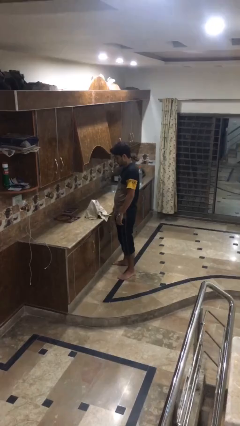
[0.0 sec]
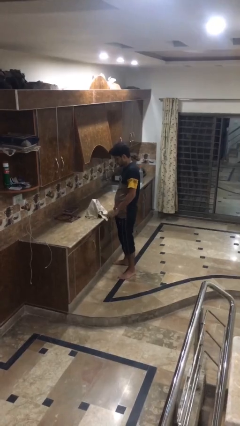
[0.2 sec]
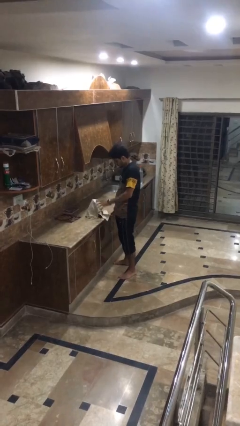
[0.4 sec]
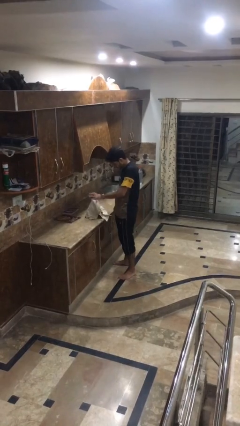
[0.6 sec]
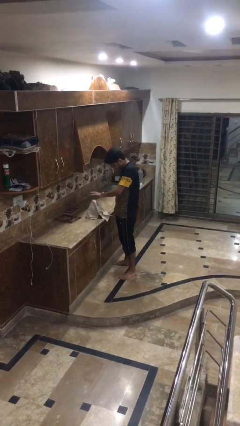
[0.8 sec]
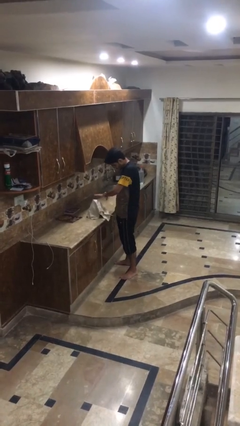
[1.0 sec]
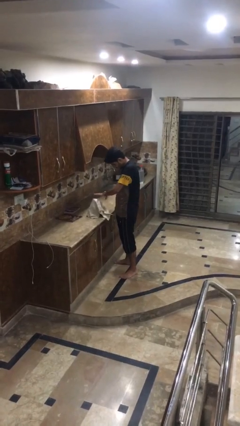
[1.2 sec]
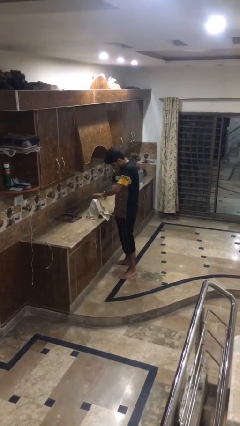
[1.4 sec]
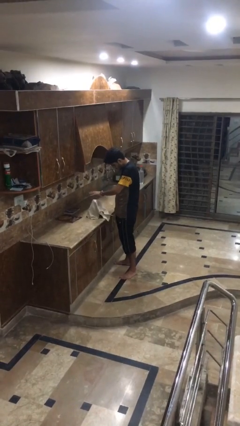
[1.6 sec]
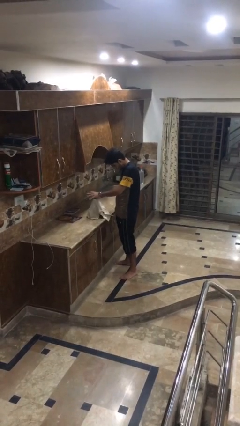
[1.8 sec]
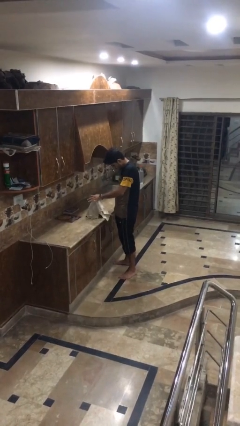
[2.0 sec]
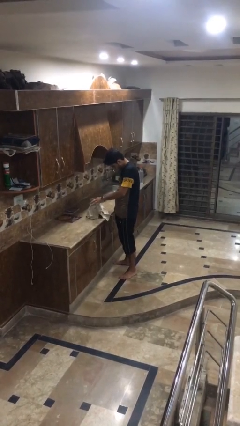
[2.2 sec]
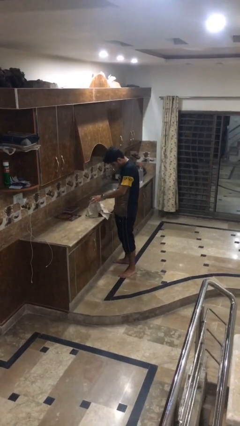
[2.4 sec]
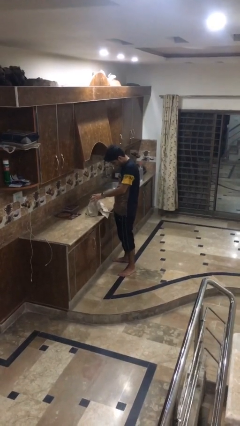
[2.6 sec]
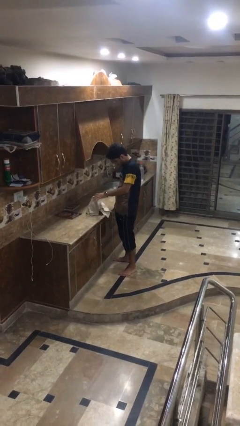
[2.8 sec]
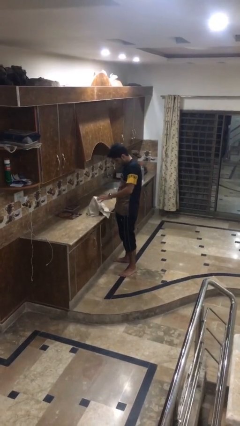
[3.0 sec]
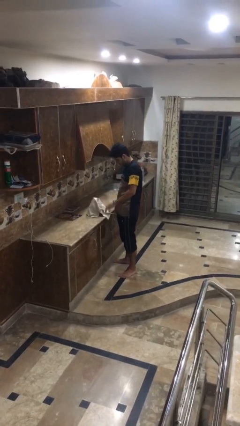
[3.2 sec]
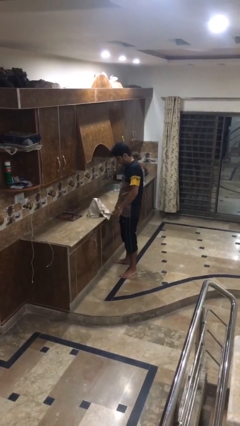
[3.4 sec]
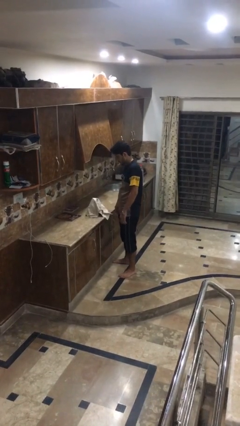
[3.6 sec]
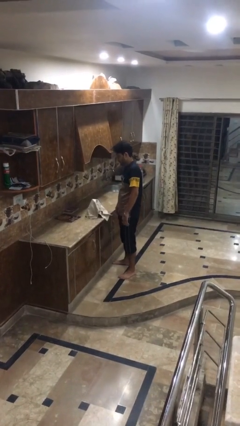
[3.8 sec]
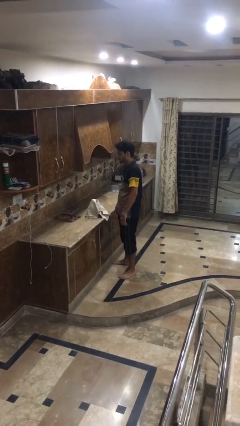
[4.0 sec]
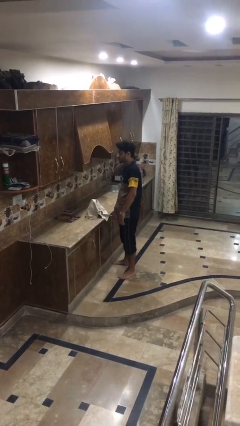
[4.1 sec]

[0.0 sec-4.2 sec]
person waves hand over object

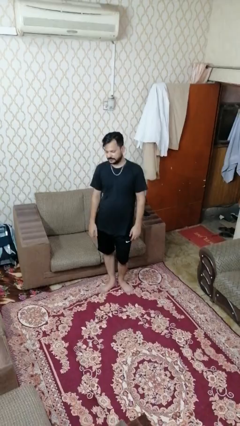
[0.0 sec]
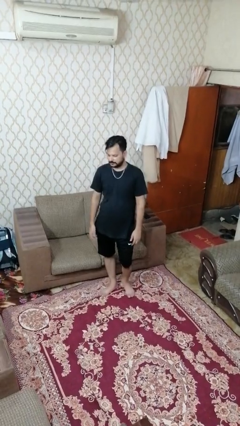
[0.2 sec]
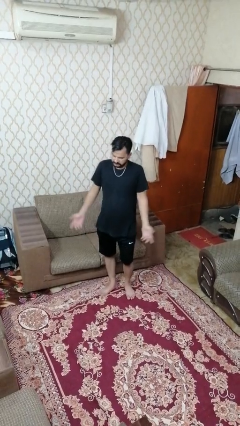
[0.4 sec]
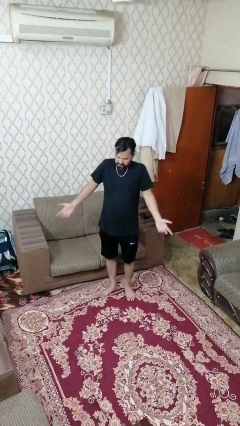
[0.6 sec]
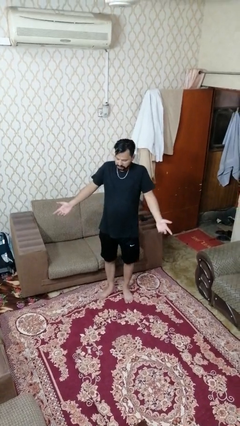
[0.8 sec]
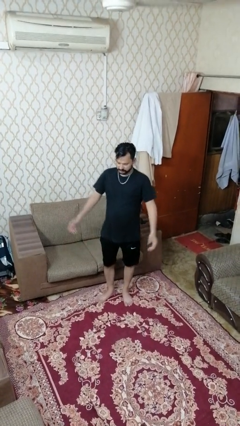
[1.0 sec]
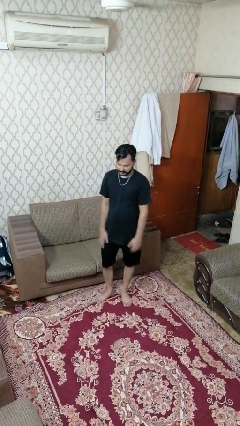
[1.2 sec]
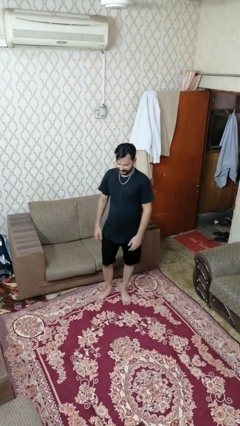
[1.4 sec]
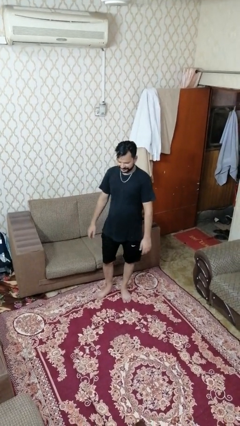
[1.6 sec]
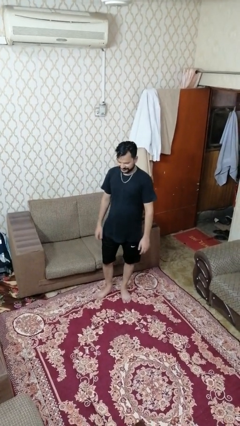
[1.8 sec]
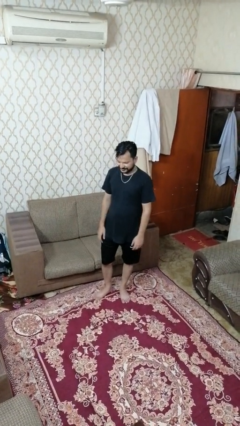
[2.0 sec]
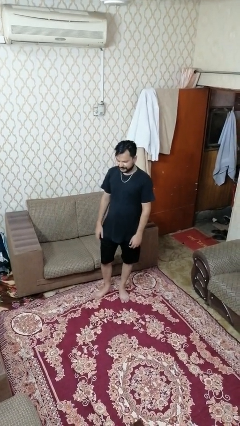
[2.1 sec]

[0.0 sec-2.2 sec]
person shrugs

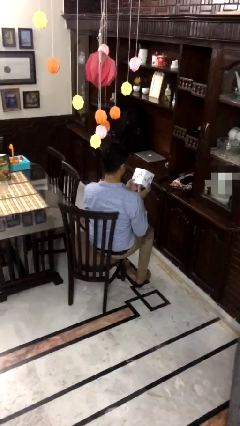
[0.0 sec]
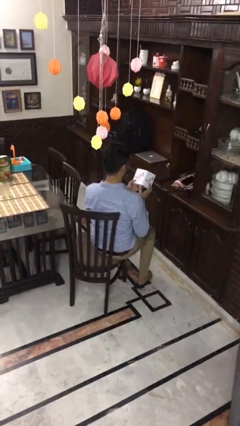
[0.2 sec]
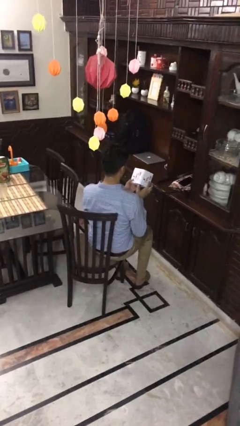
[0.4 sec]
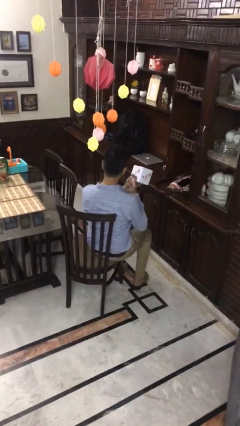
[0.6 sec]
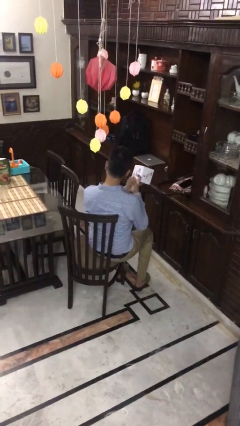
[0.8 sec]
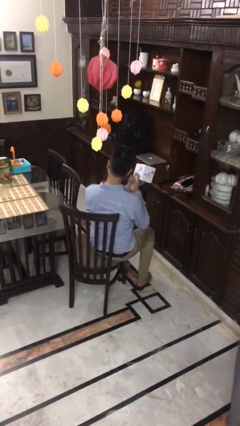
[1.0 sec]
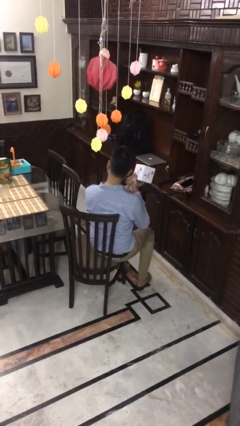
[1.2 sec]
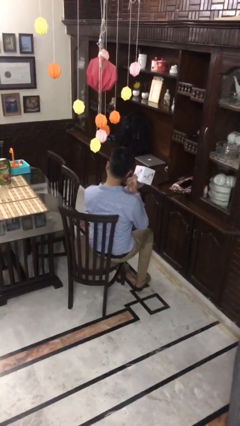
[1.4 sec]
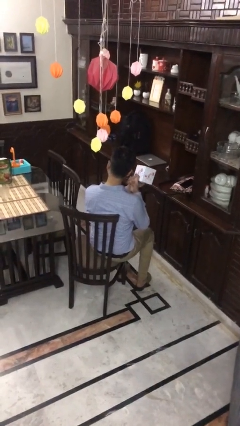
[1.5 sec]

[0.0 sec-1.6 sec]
person taps object with finger

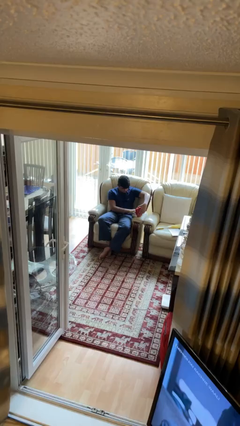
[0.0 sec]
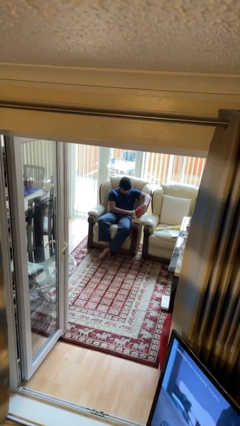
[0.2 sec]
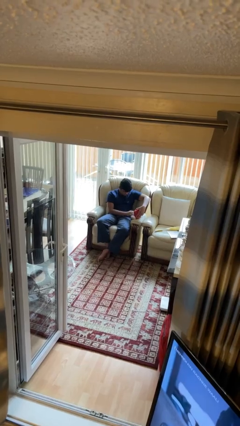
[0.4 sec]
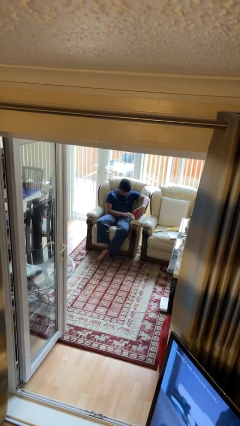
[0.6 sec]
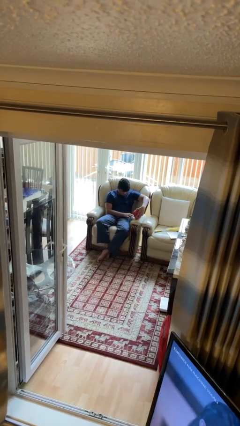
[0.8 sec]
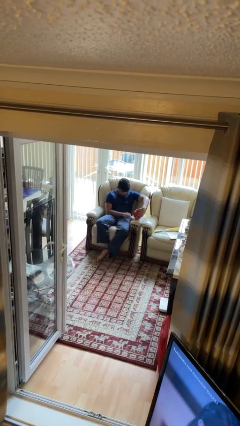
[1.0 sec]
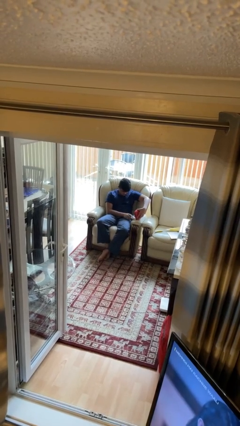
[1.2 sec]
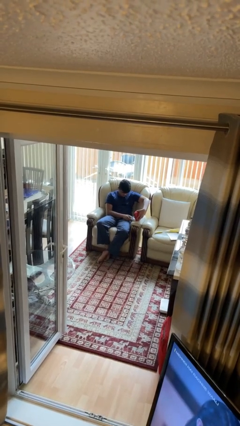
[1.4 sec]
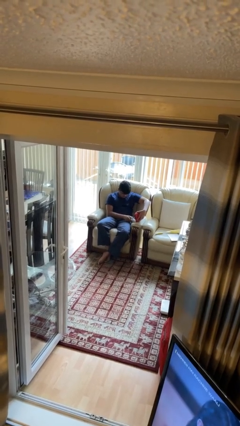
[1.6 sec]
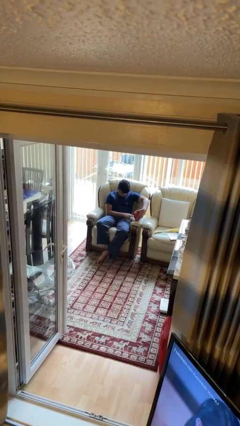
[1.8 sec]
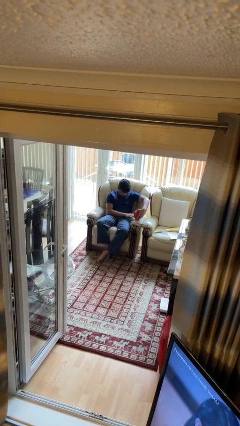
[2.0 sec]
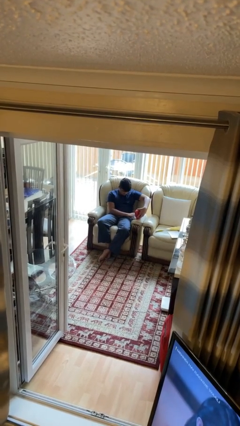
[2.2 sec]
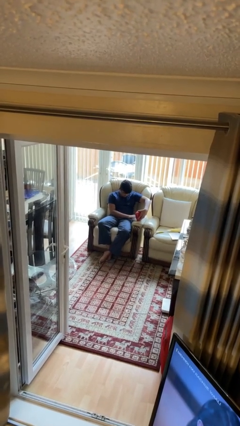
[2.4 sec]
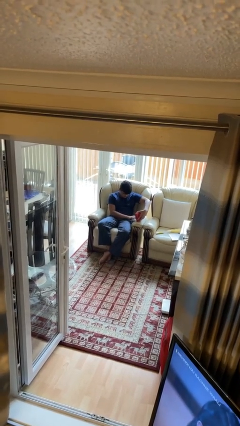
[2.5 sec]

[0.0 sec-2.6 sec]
person searches jewelry box

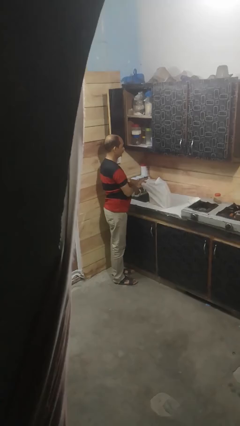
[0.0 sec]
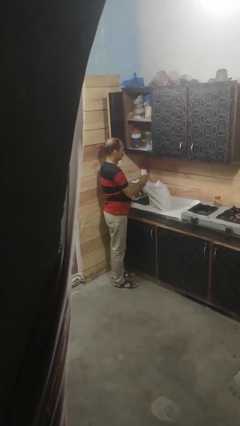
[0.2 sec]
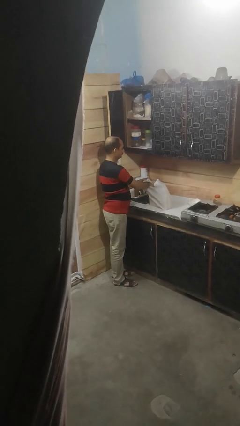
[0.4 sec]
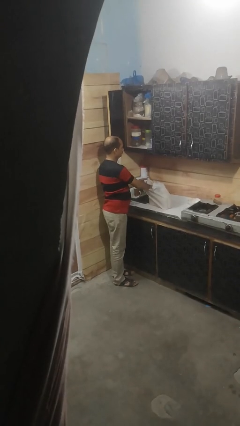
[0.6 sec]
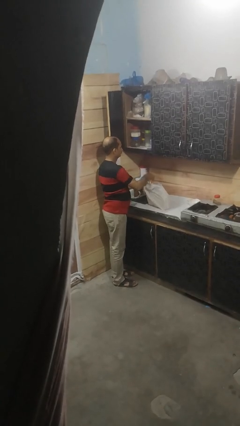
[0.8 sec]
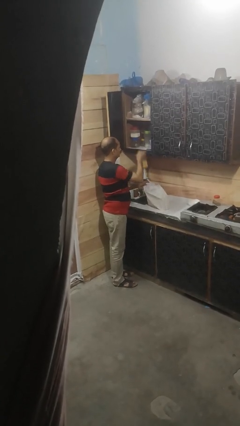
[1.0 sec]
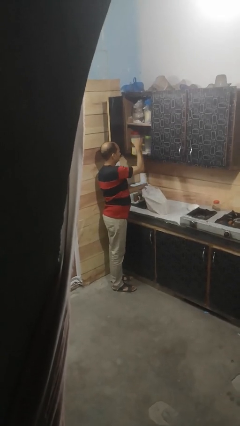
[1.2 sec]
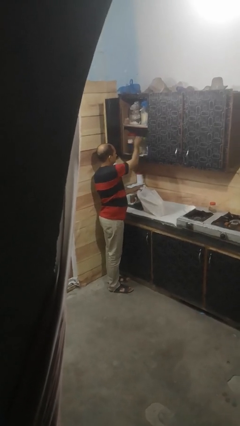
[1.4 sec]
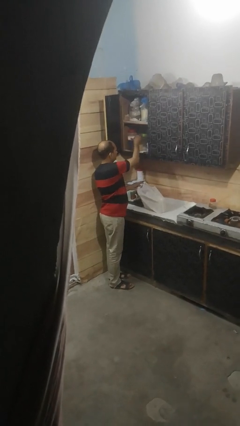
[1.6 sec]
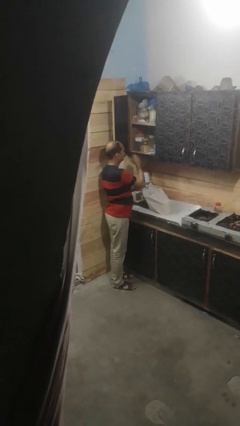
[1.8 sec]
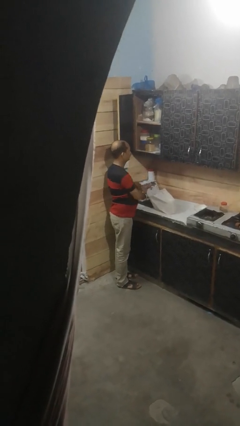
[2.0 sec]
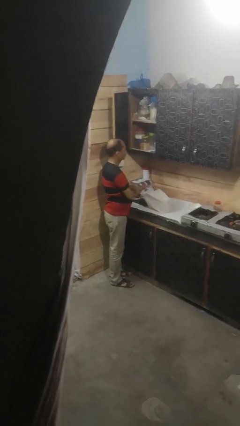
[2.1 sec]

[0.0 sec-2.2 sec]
person loads groceries into cabinet

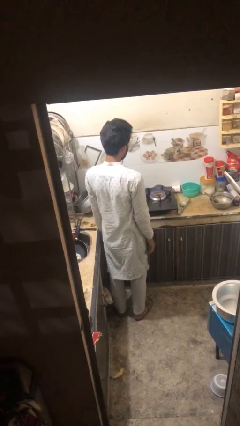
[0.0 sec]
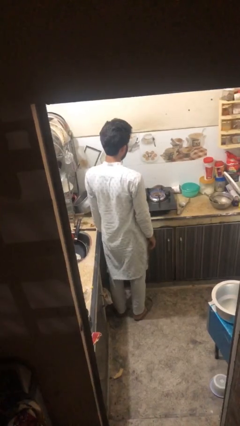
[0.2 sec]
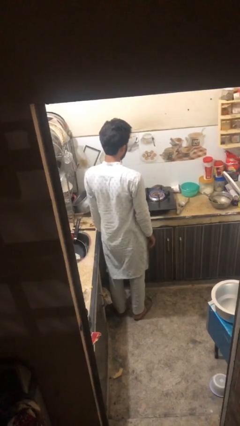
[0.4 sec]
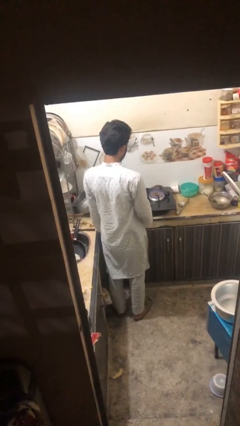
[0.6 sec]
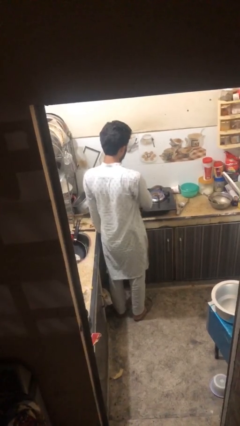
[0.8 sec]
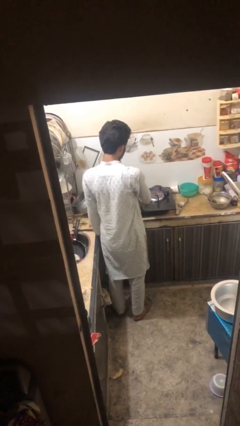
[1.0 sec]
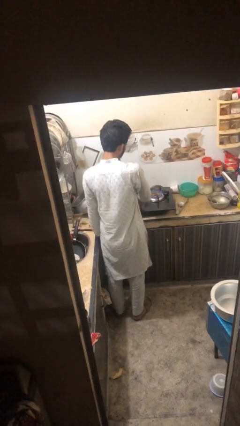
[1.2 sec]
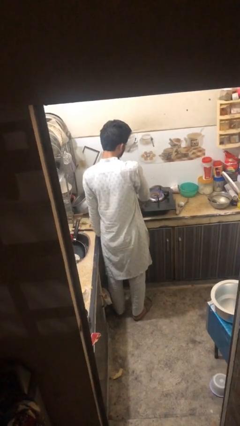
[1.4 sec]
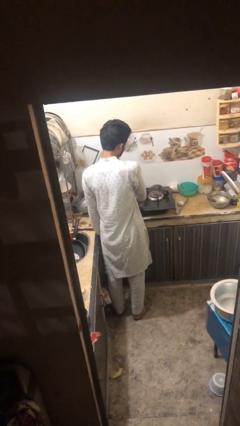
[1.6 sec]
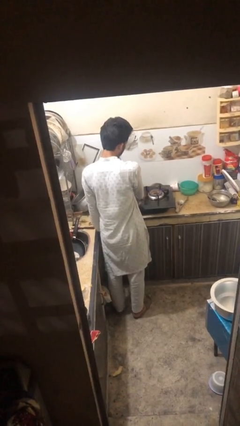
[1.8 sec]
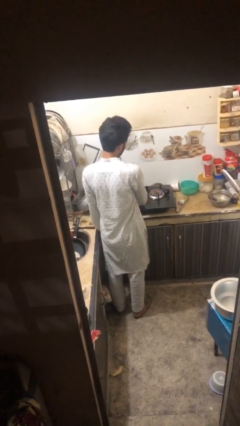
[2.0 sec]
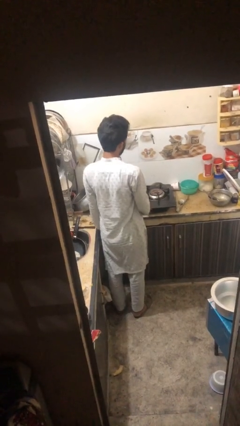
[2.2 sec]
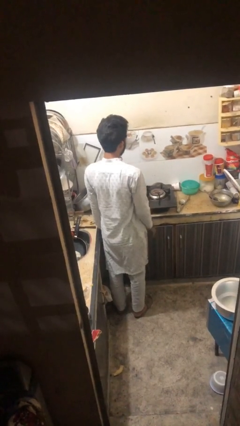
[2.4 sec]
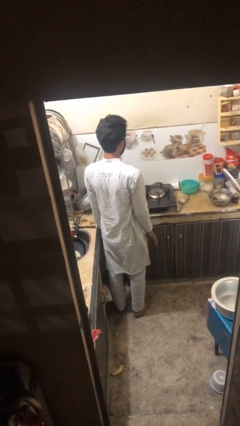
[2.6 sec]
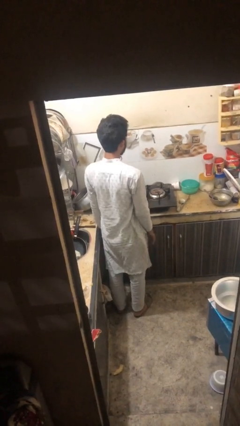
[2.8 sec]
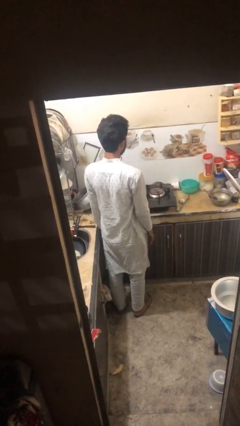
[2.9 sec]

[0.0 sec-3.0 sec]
person turns off stovetop

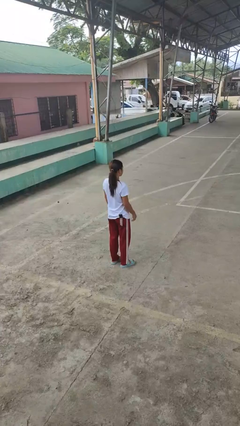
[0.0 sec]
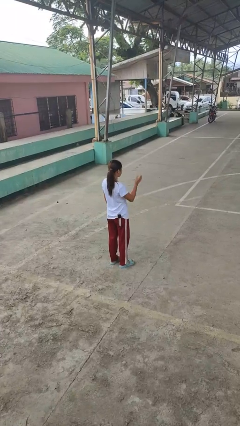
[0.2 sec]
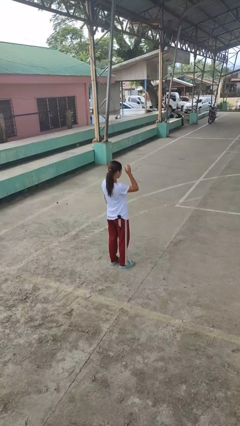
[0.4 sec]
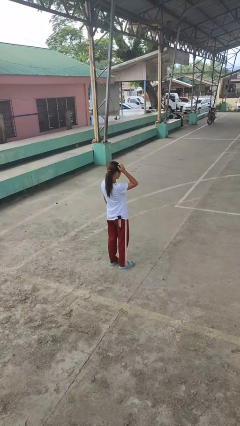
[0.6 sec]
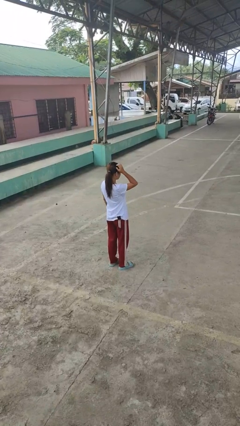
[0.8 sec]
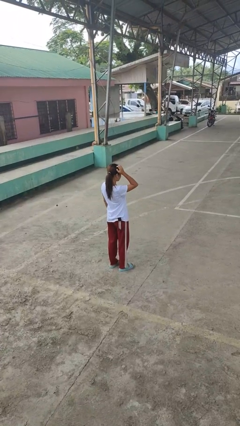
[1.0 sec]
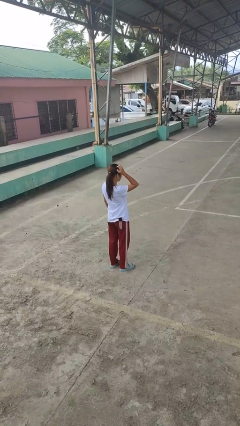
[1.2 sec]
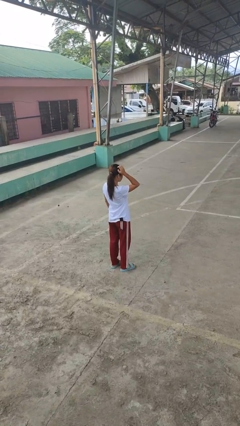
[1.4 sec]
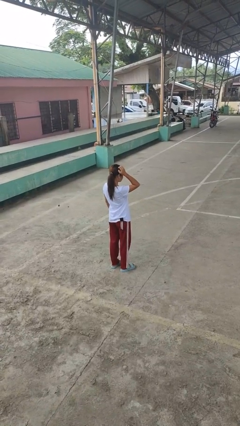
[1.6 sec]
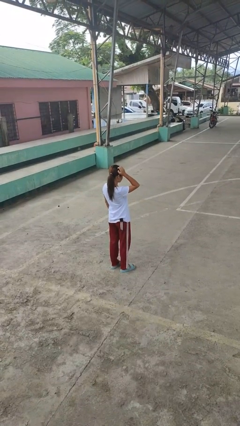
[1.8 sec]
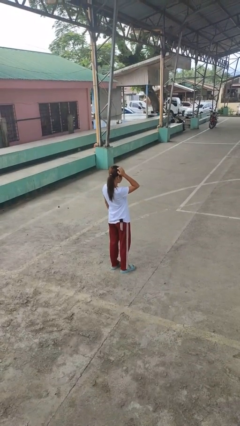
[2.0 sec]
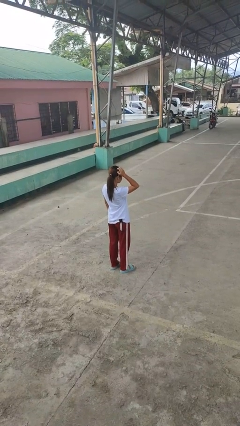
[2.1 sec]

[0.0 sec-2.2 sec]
person scratches face
